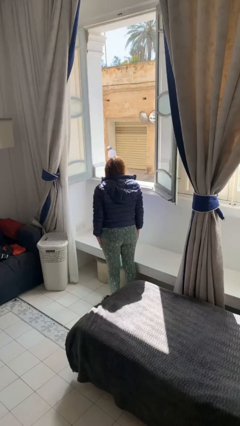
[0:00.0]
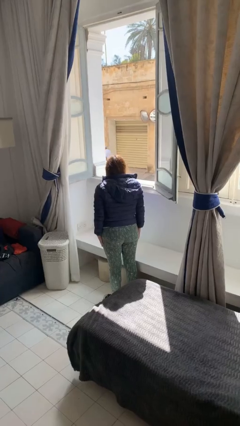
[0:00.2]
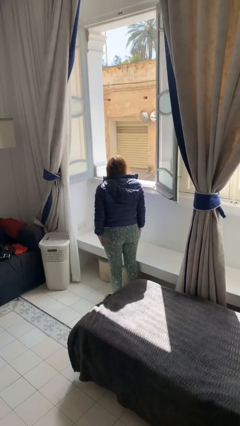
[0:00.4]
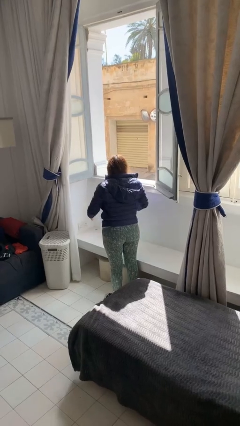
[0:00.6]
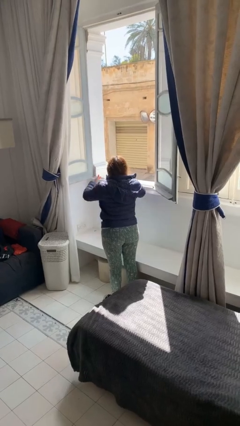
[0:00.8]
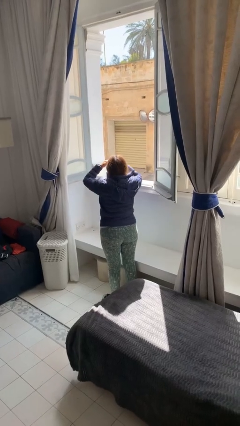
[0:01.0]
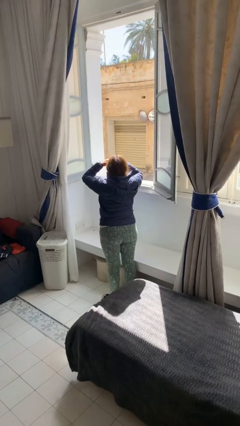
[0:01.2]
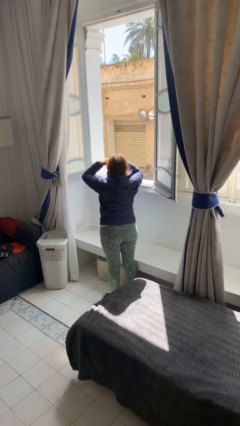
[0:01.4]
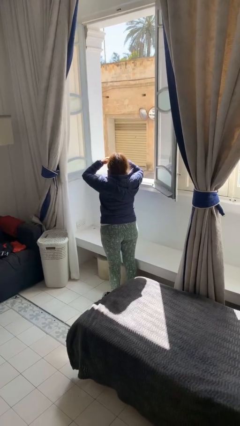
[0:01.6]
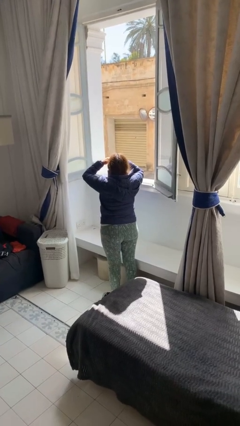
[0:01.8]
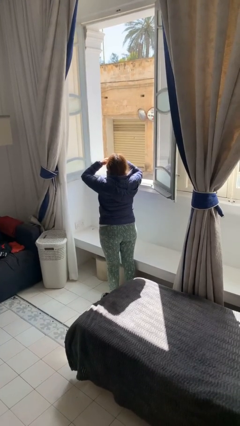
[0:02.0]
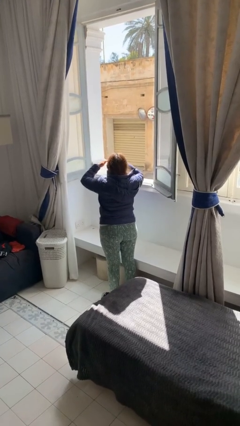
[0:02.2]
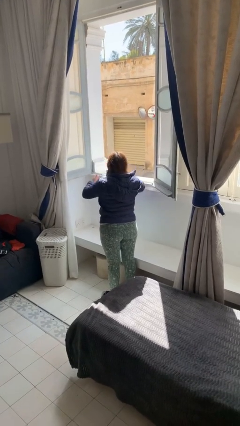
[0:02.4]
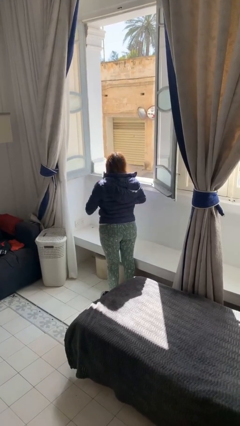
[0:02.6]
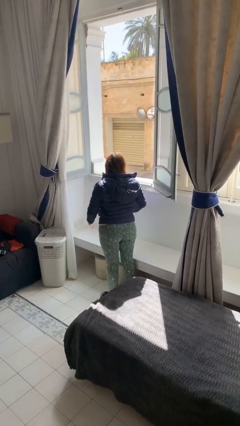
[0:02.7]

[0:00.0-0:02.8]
person shades eyes

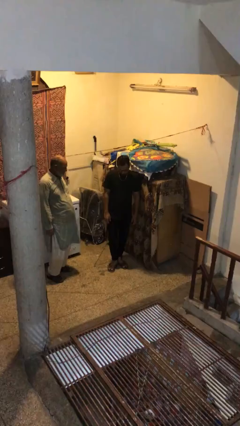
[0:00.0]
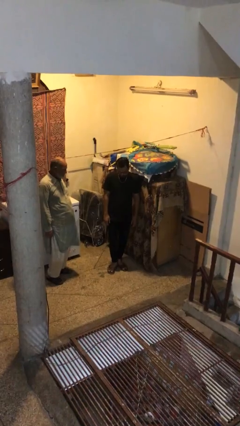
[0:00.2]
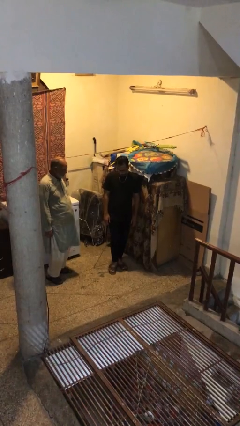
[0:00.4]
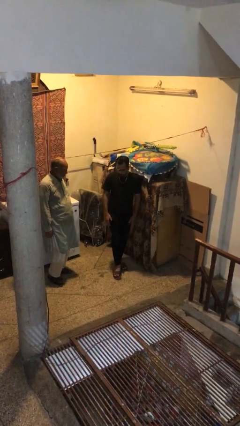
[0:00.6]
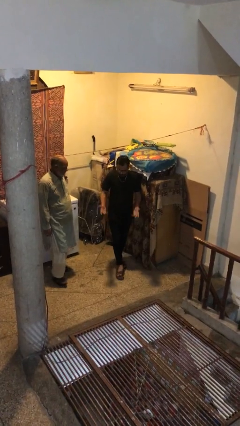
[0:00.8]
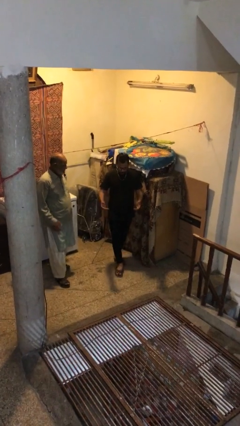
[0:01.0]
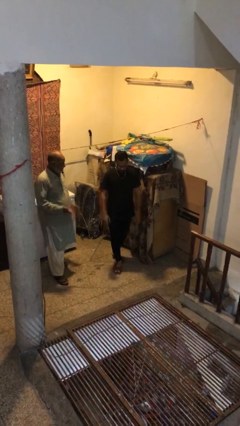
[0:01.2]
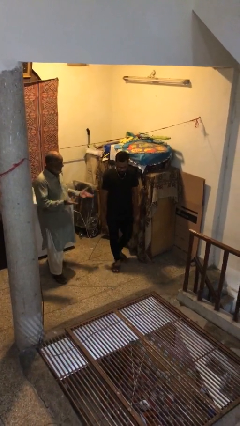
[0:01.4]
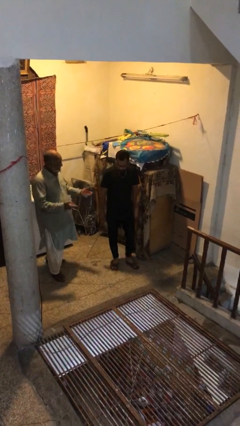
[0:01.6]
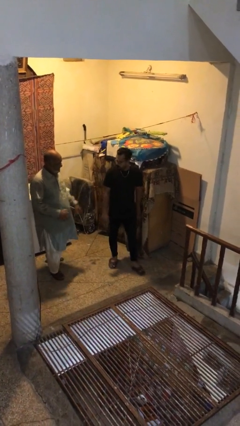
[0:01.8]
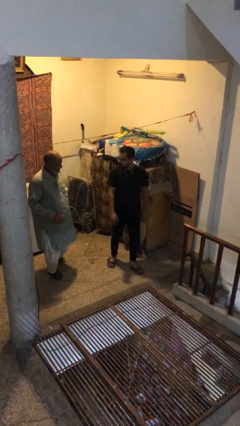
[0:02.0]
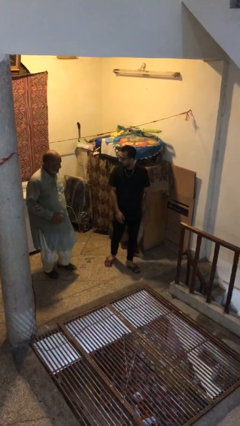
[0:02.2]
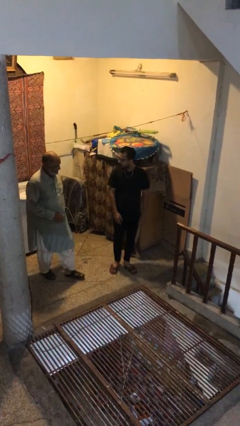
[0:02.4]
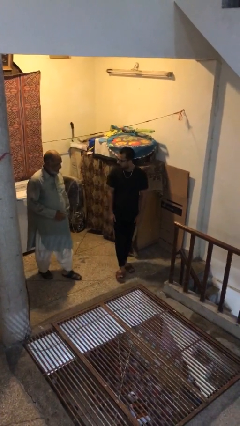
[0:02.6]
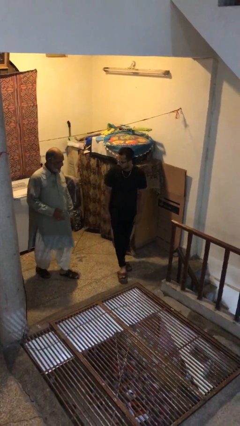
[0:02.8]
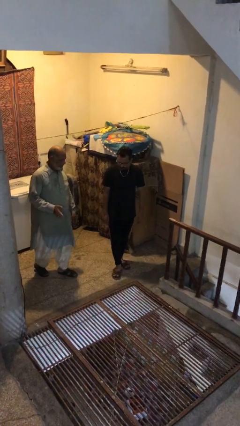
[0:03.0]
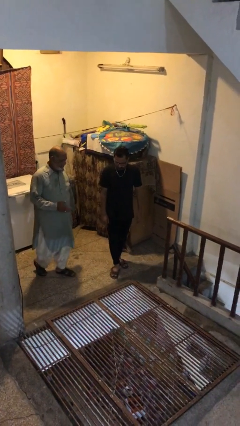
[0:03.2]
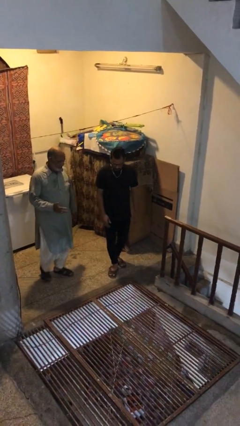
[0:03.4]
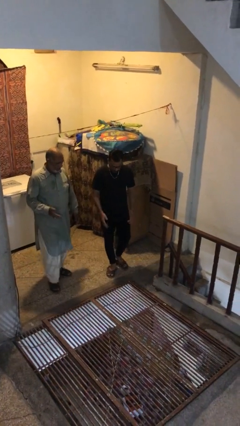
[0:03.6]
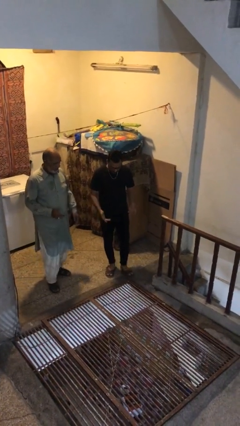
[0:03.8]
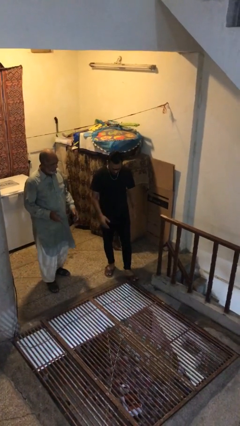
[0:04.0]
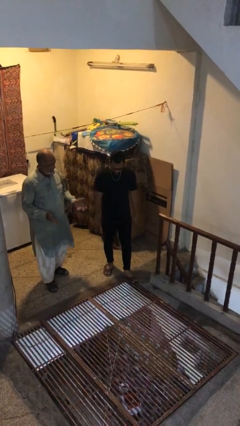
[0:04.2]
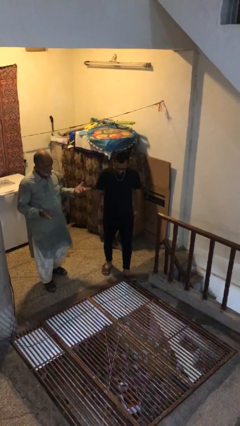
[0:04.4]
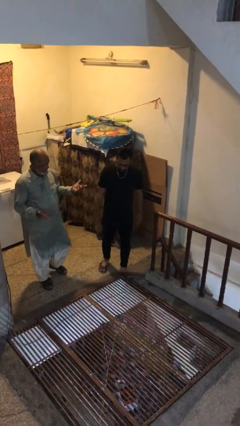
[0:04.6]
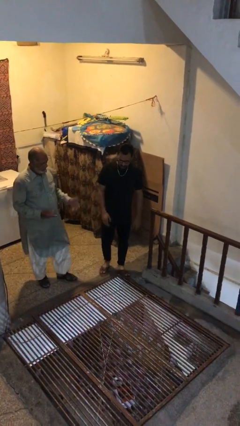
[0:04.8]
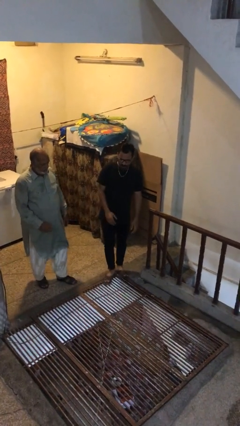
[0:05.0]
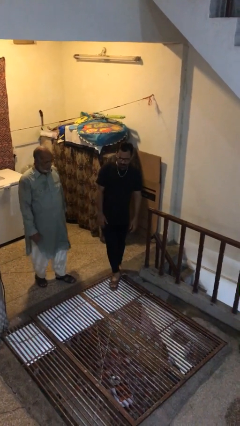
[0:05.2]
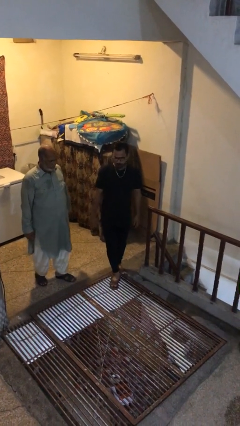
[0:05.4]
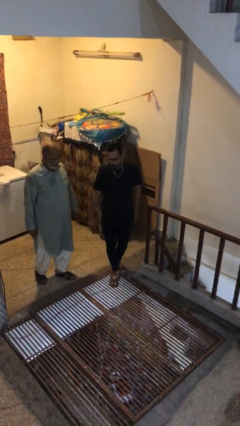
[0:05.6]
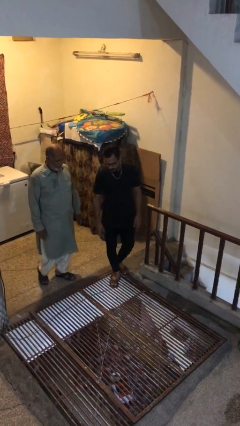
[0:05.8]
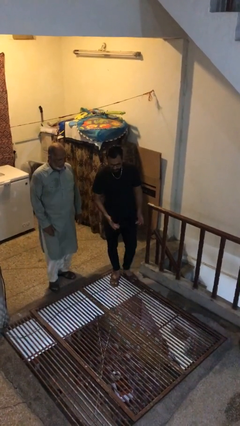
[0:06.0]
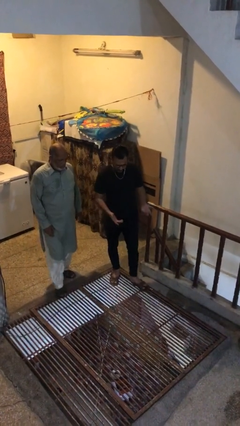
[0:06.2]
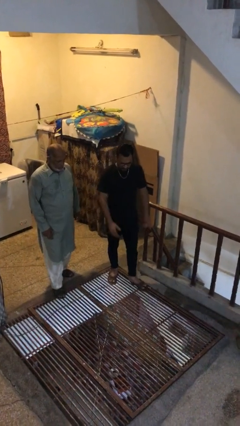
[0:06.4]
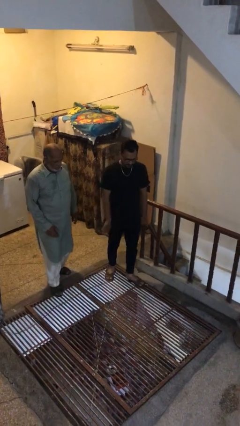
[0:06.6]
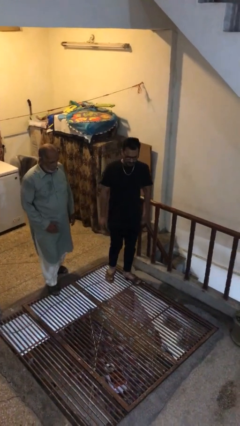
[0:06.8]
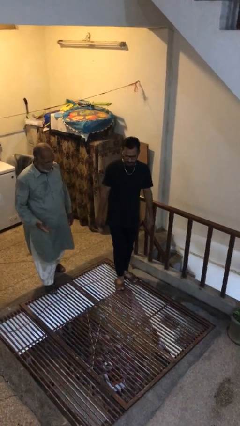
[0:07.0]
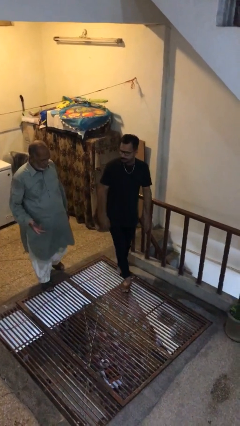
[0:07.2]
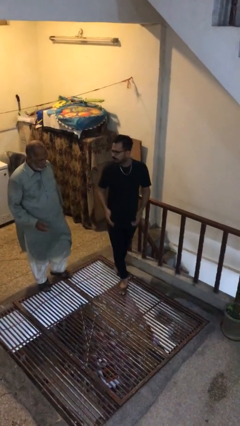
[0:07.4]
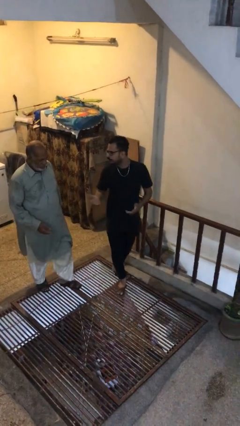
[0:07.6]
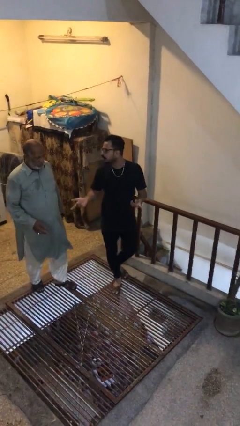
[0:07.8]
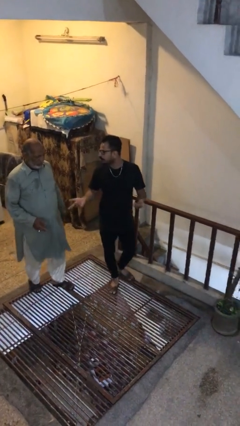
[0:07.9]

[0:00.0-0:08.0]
person talks to person

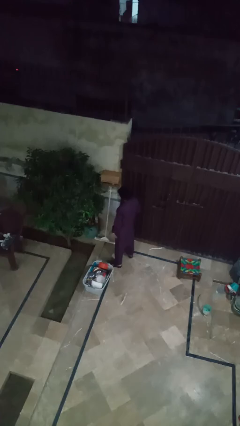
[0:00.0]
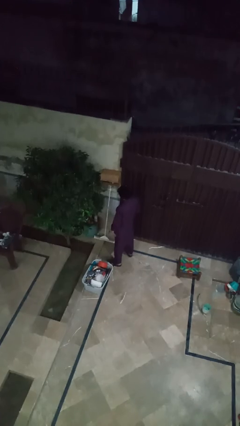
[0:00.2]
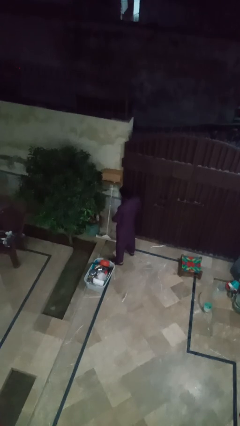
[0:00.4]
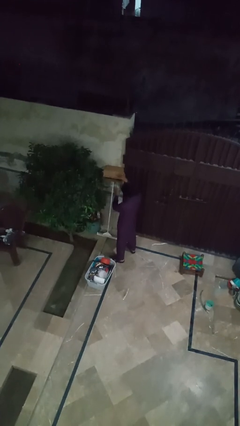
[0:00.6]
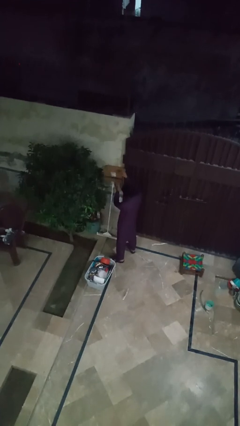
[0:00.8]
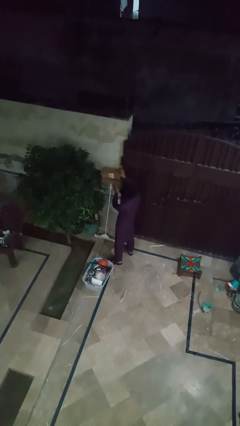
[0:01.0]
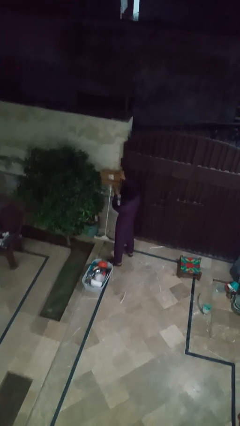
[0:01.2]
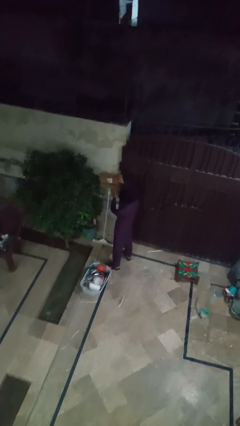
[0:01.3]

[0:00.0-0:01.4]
person opens mailbox

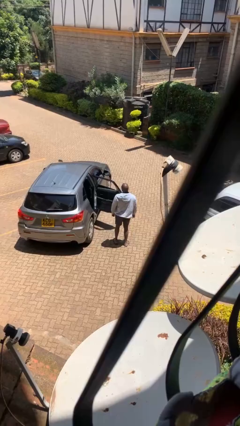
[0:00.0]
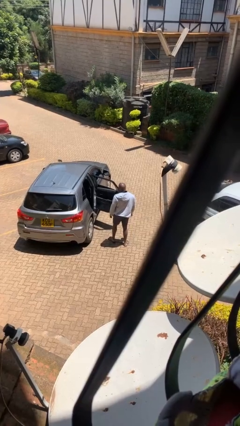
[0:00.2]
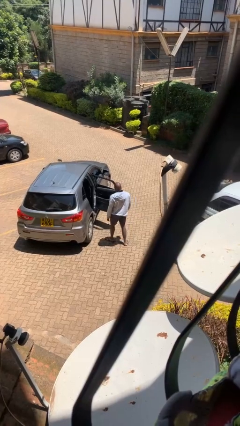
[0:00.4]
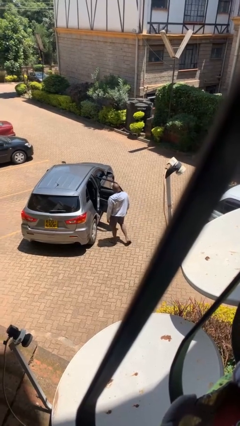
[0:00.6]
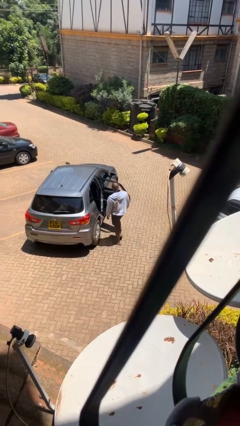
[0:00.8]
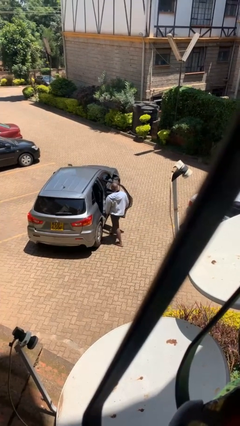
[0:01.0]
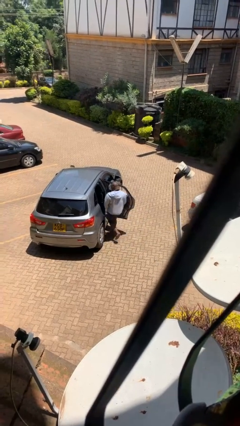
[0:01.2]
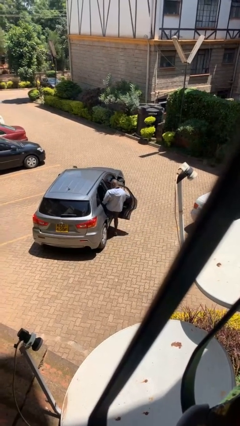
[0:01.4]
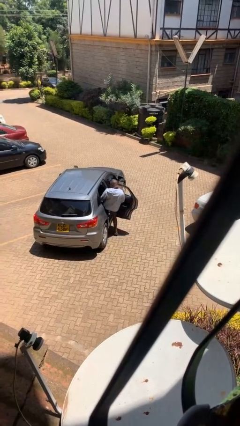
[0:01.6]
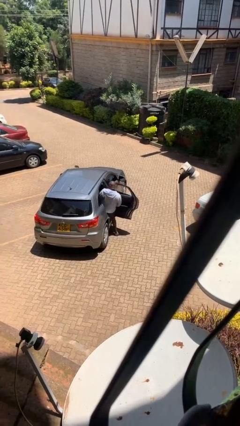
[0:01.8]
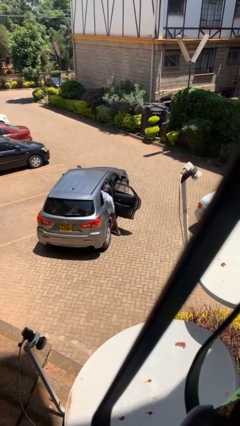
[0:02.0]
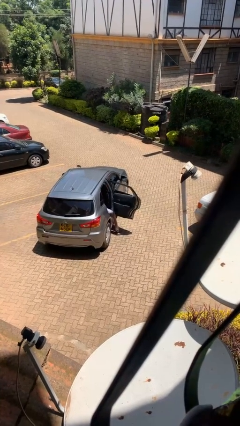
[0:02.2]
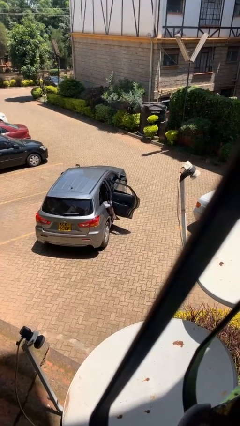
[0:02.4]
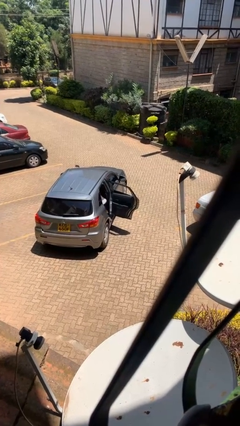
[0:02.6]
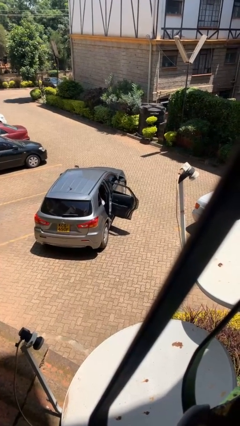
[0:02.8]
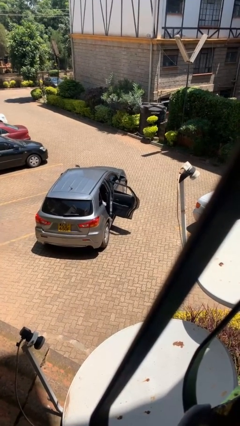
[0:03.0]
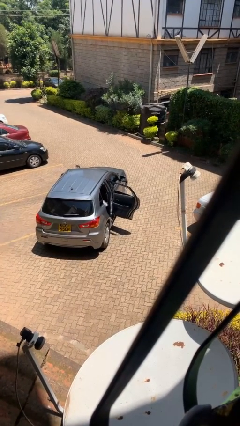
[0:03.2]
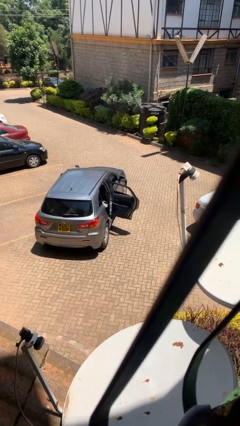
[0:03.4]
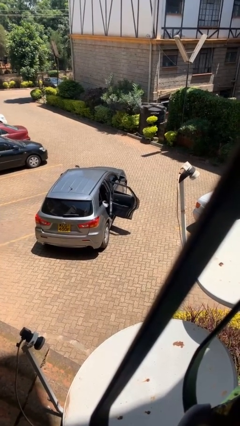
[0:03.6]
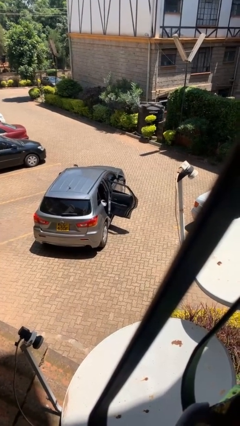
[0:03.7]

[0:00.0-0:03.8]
person enters car

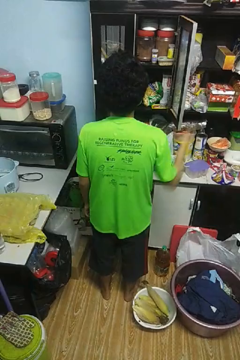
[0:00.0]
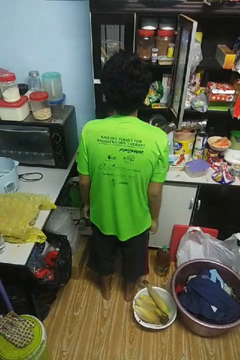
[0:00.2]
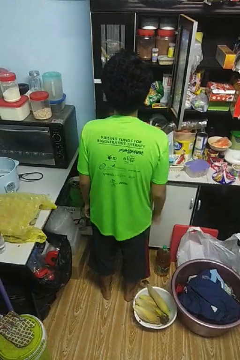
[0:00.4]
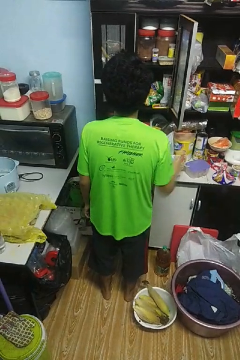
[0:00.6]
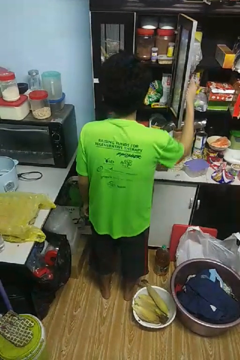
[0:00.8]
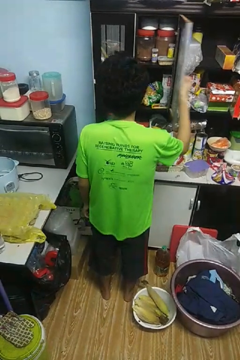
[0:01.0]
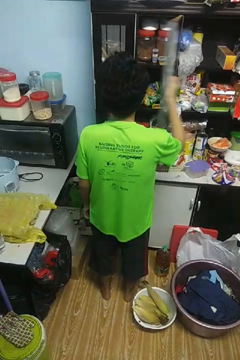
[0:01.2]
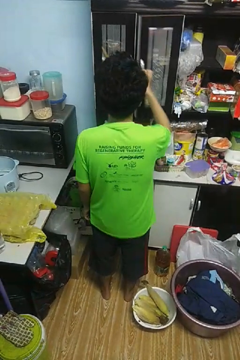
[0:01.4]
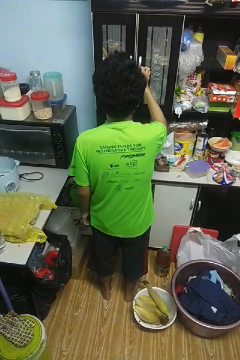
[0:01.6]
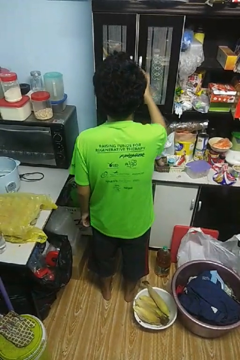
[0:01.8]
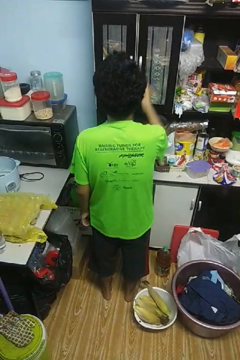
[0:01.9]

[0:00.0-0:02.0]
person closes cabinet
